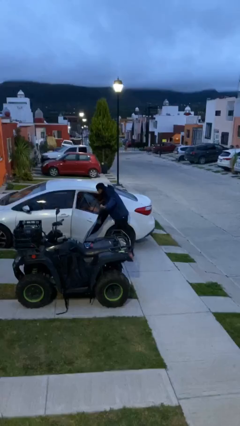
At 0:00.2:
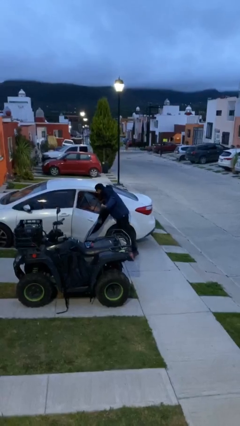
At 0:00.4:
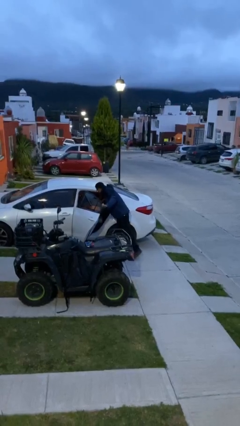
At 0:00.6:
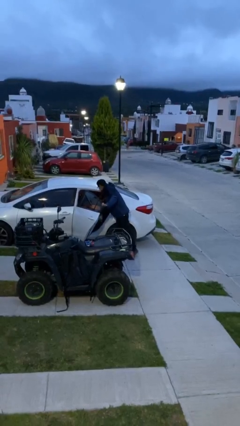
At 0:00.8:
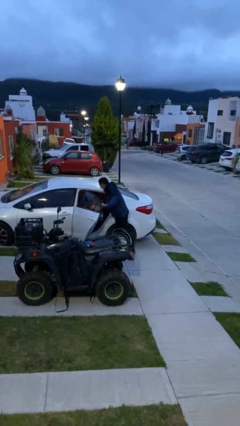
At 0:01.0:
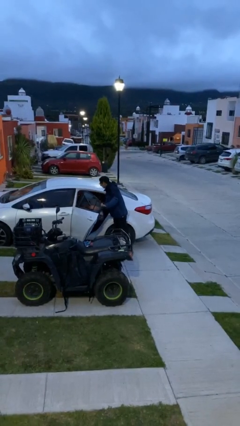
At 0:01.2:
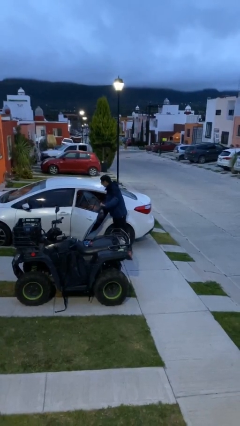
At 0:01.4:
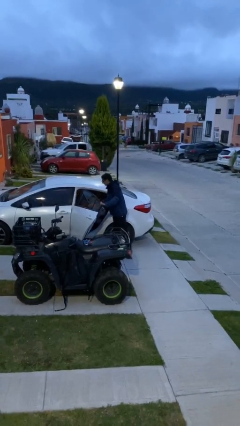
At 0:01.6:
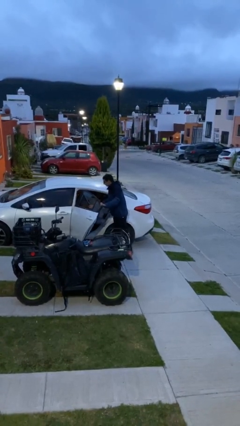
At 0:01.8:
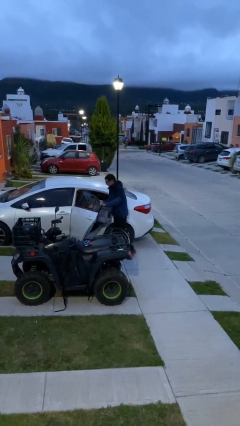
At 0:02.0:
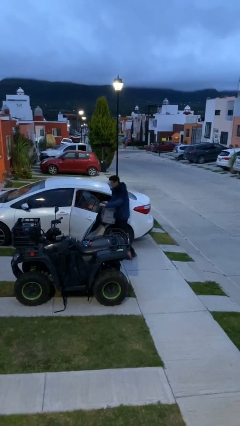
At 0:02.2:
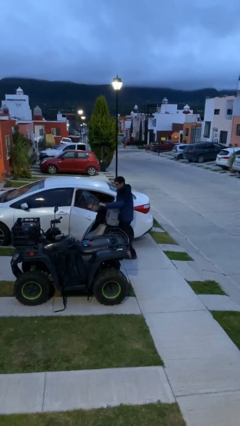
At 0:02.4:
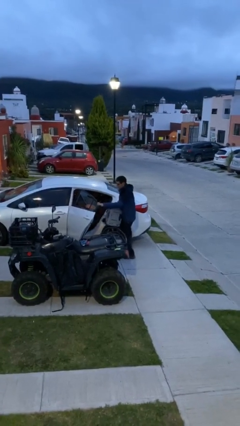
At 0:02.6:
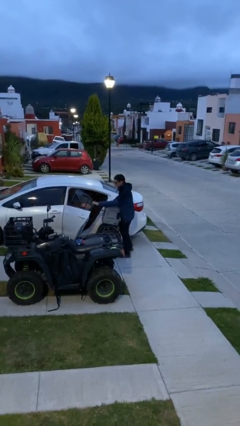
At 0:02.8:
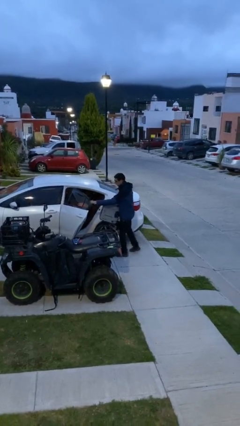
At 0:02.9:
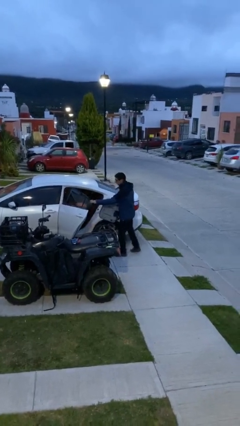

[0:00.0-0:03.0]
person unloads car

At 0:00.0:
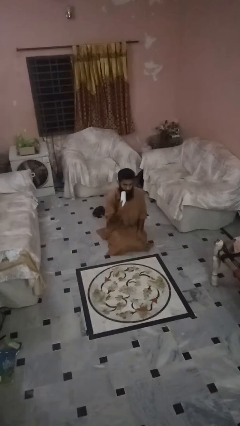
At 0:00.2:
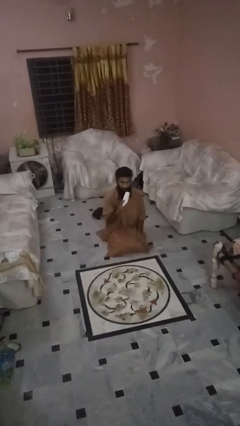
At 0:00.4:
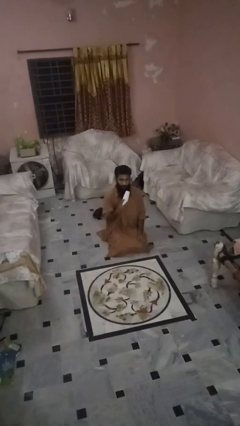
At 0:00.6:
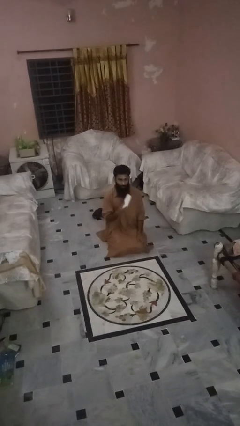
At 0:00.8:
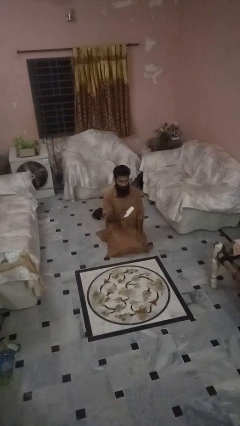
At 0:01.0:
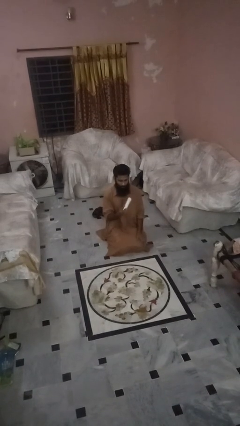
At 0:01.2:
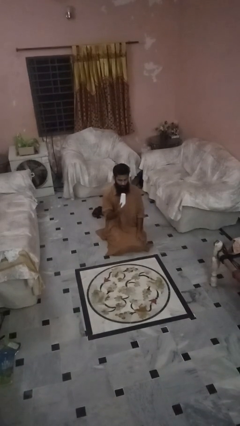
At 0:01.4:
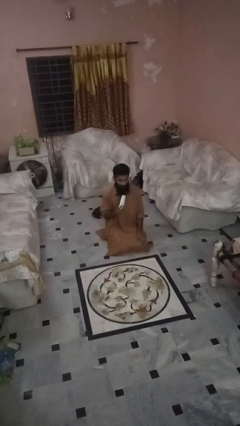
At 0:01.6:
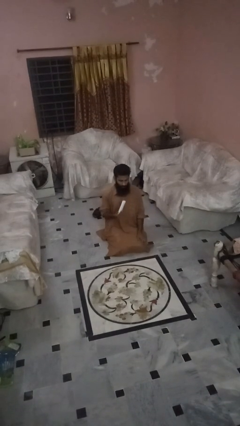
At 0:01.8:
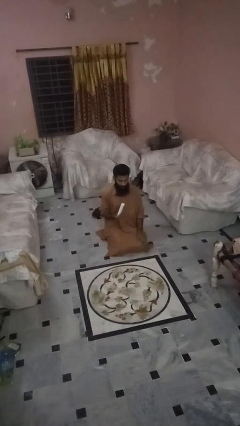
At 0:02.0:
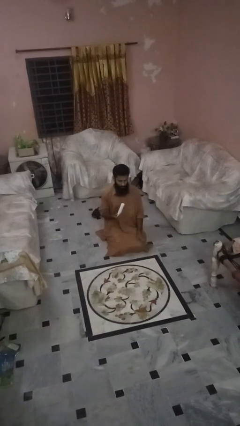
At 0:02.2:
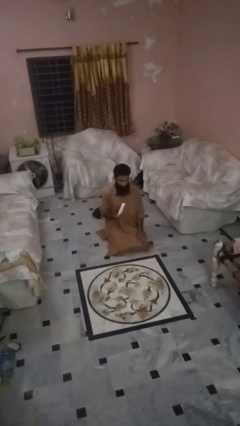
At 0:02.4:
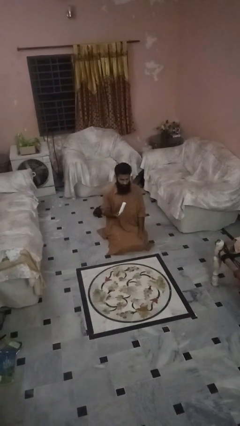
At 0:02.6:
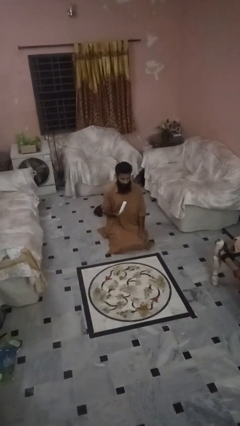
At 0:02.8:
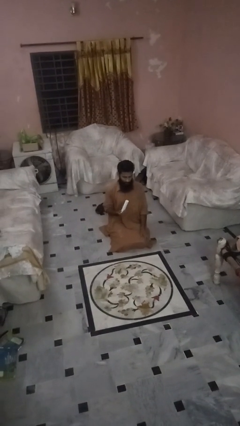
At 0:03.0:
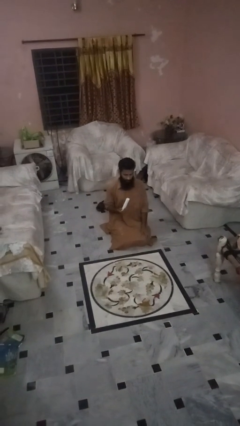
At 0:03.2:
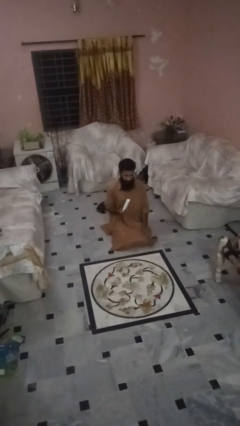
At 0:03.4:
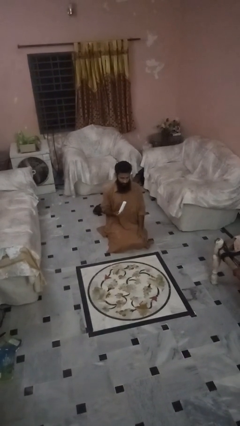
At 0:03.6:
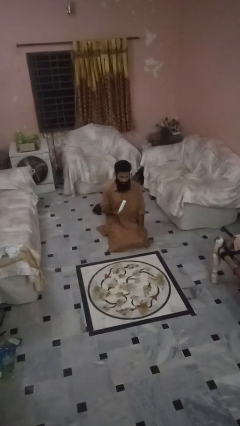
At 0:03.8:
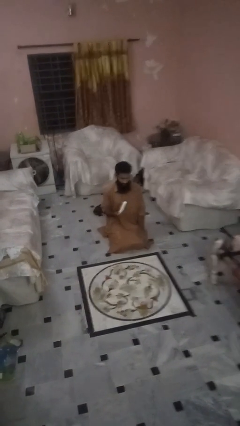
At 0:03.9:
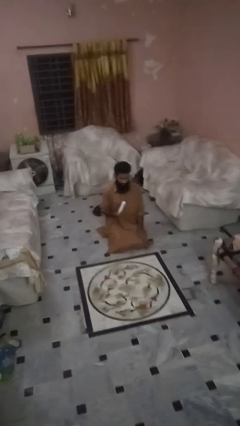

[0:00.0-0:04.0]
person picks up object from floor

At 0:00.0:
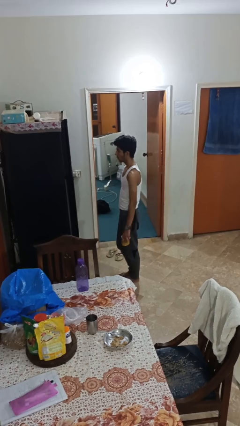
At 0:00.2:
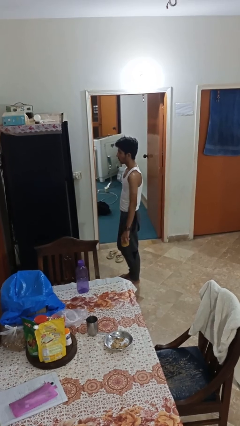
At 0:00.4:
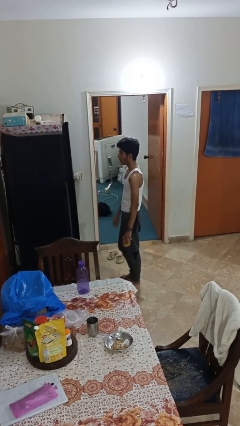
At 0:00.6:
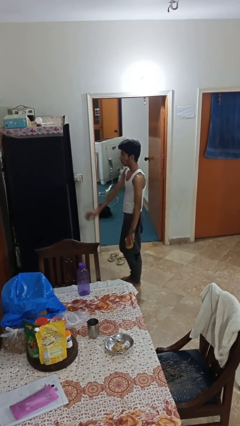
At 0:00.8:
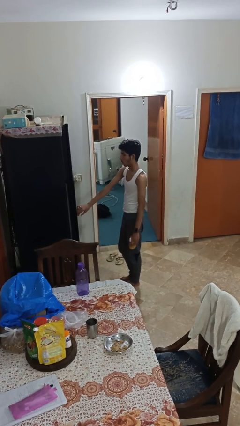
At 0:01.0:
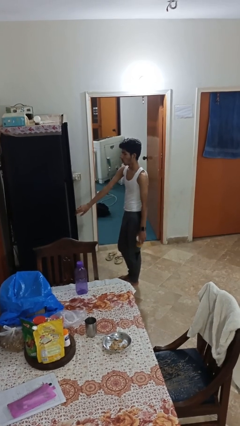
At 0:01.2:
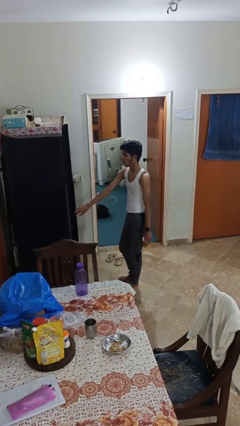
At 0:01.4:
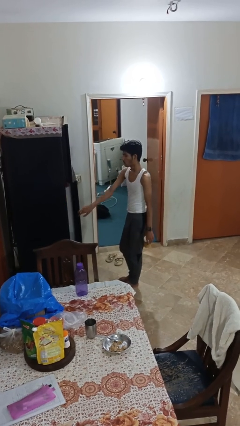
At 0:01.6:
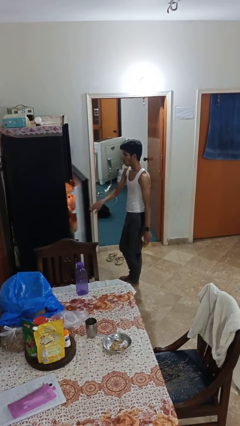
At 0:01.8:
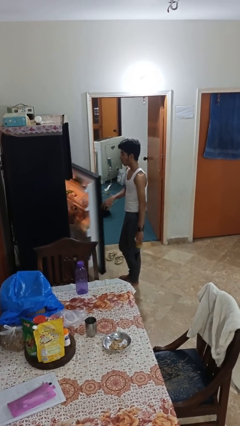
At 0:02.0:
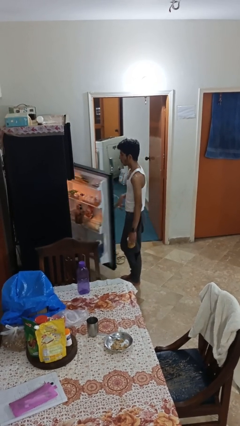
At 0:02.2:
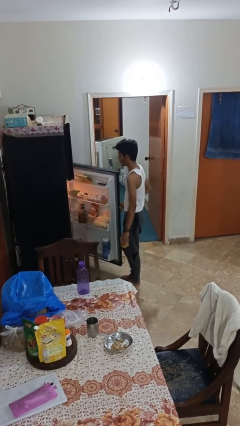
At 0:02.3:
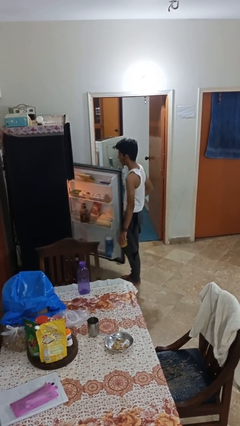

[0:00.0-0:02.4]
person opens refrigerator

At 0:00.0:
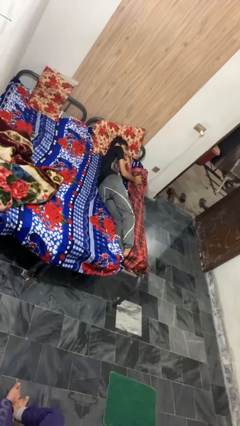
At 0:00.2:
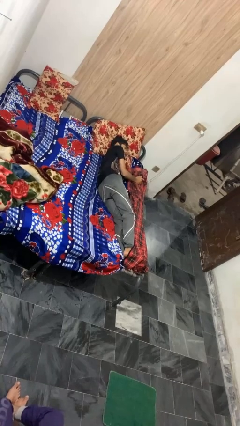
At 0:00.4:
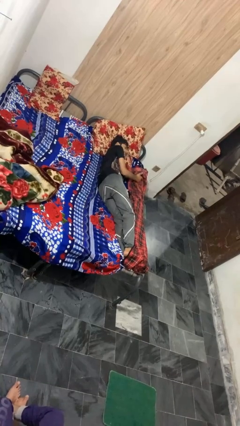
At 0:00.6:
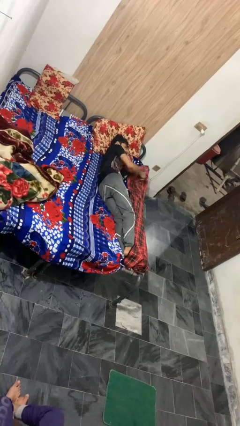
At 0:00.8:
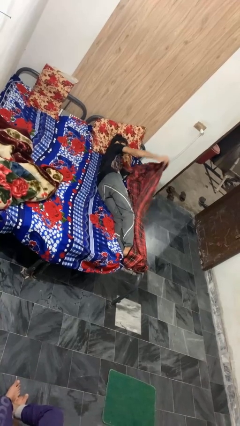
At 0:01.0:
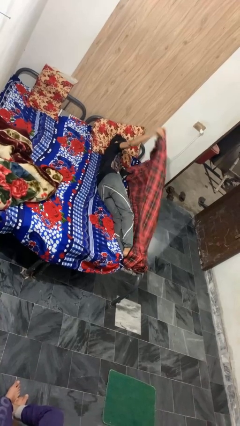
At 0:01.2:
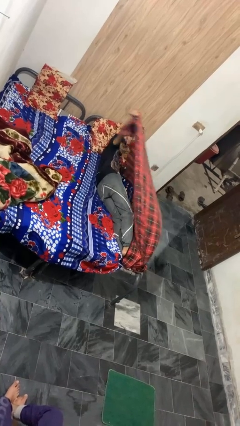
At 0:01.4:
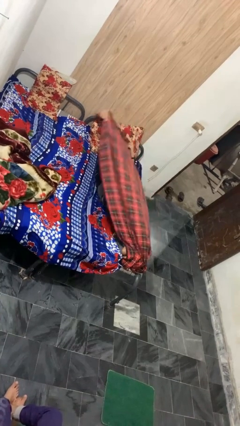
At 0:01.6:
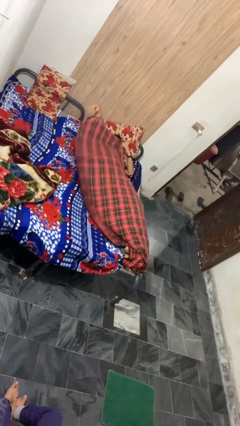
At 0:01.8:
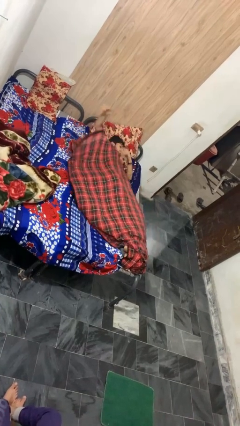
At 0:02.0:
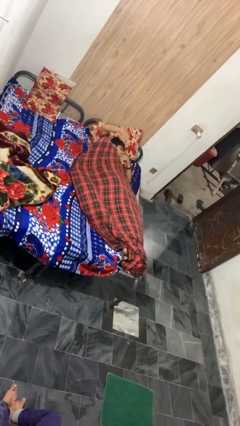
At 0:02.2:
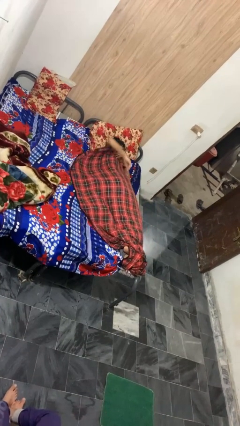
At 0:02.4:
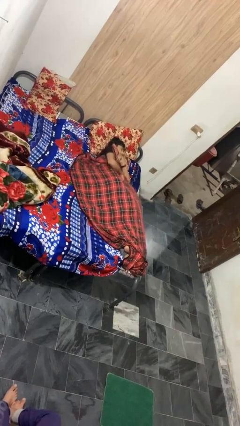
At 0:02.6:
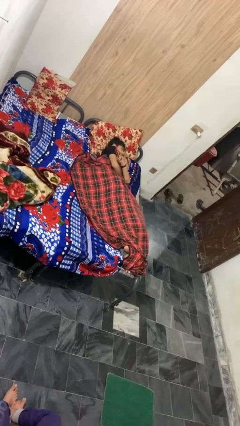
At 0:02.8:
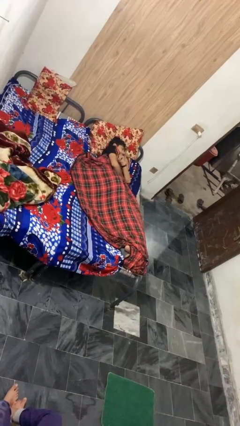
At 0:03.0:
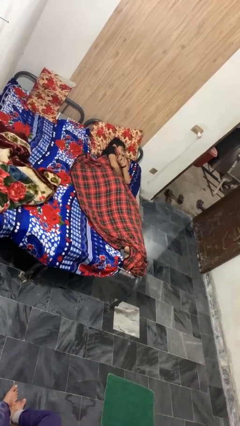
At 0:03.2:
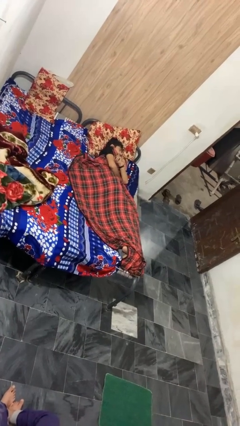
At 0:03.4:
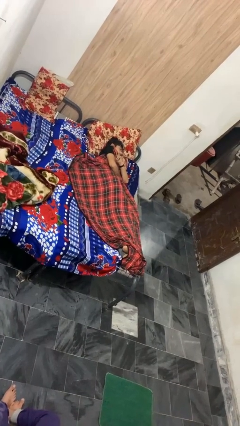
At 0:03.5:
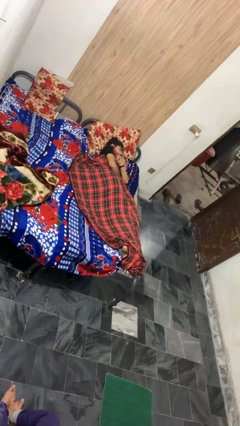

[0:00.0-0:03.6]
person covers with blanket

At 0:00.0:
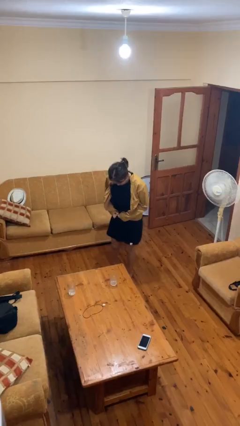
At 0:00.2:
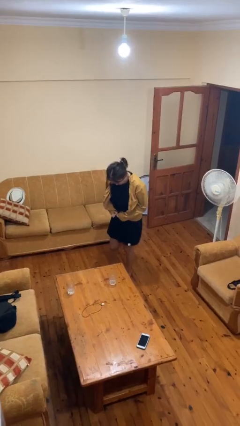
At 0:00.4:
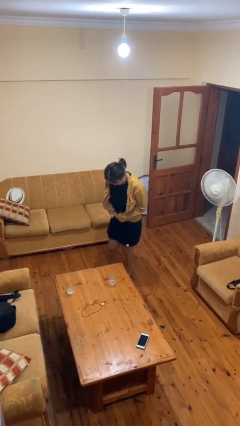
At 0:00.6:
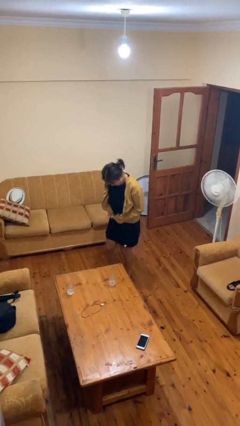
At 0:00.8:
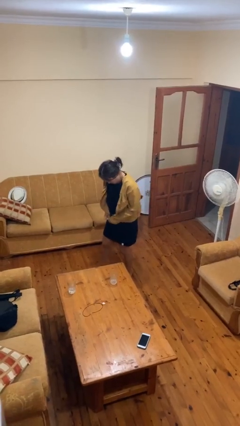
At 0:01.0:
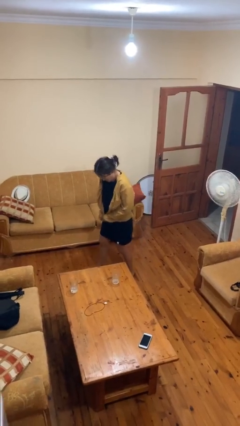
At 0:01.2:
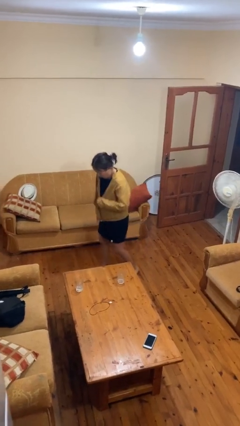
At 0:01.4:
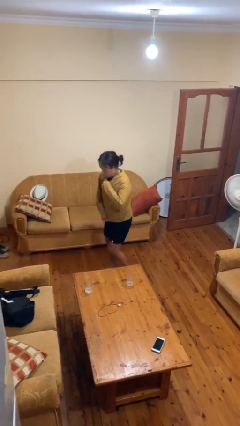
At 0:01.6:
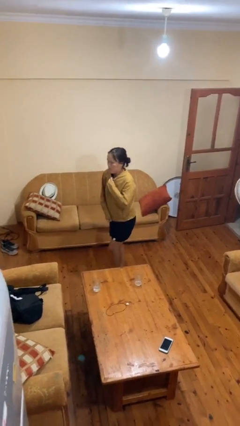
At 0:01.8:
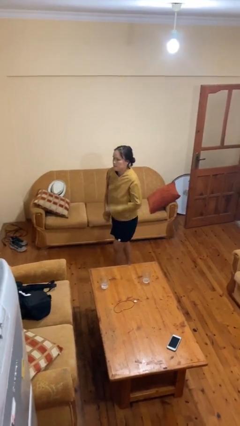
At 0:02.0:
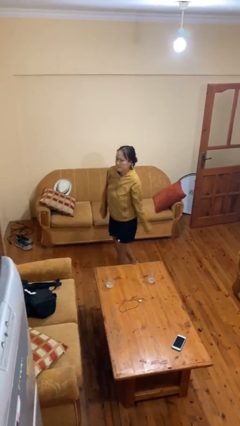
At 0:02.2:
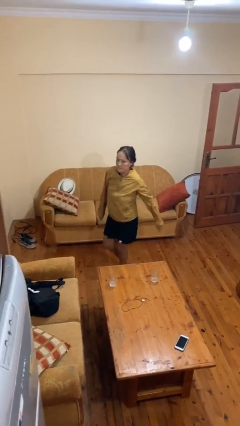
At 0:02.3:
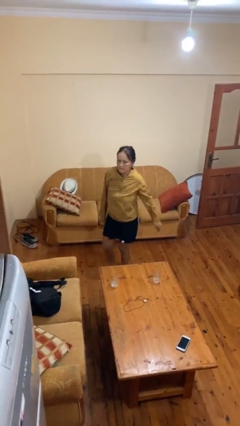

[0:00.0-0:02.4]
person zips up jacket

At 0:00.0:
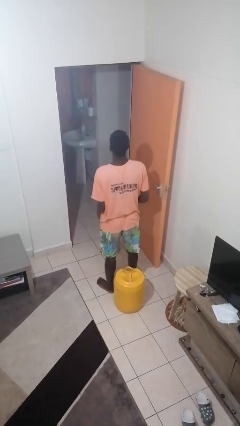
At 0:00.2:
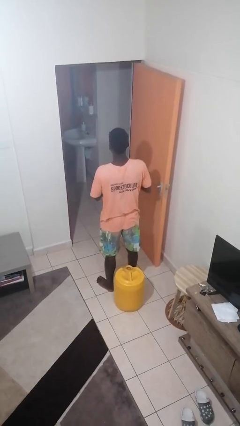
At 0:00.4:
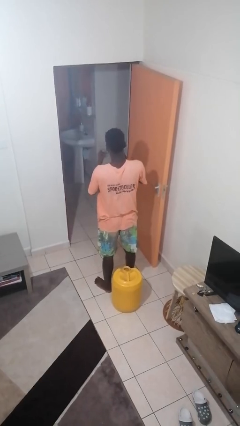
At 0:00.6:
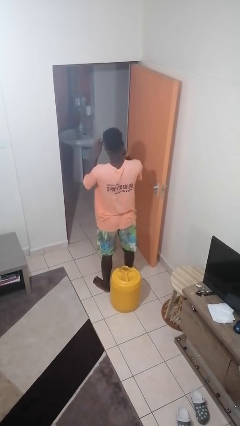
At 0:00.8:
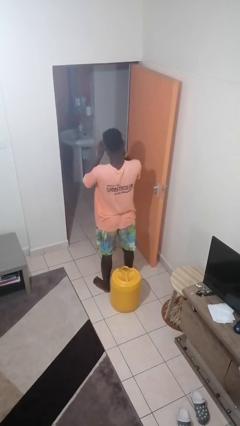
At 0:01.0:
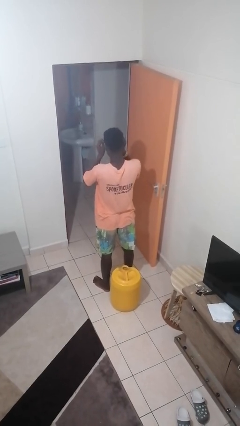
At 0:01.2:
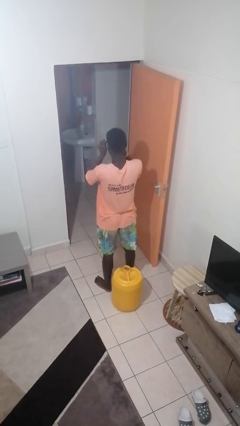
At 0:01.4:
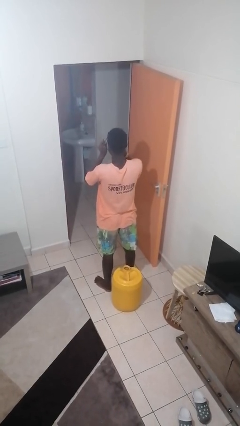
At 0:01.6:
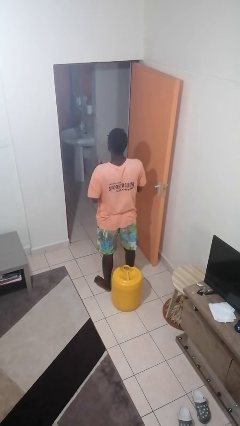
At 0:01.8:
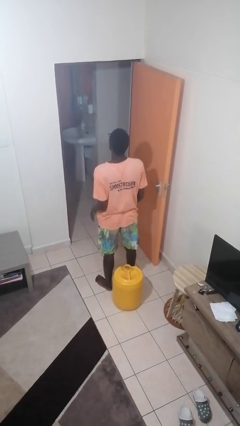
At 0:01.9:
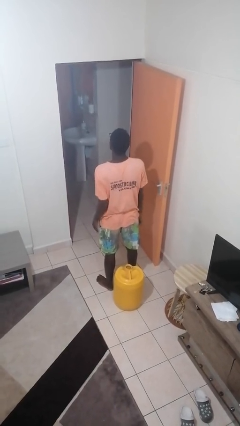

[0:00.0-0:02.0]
person puts on glasses

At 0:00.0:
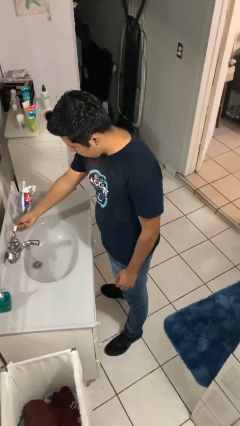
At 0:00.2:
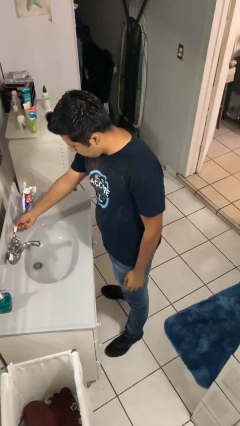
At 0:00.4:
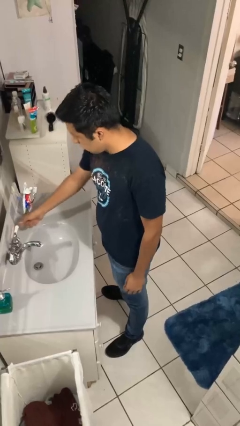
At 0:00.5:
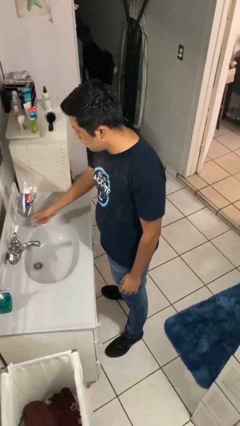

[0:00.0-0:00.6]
person turns off faucet
